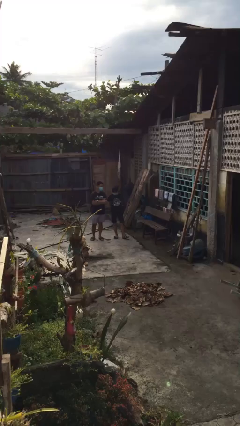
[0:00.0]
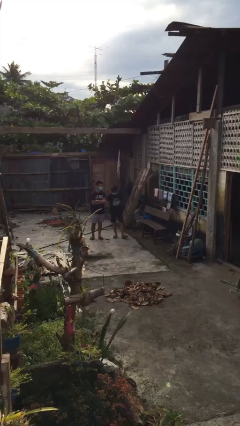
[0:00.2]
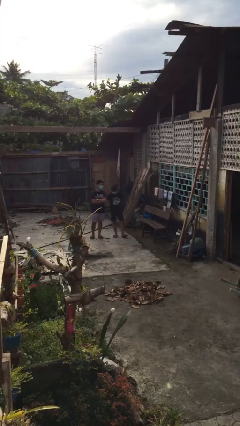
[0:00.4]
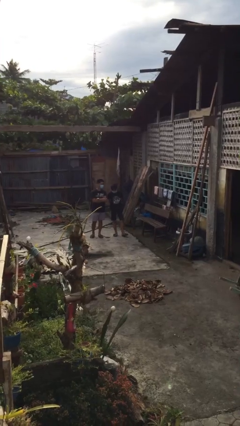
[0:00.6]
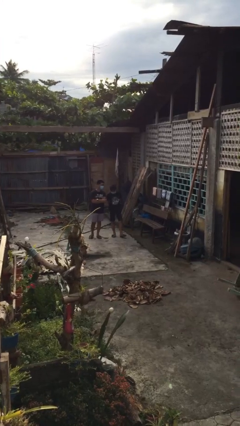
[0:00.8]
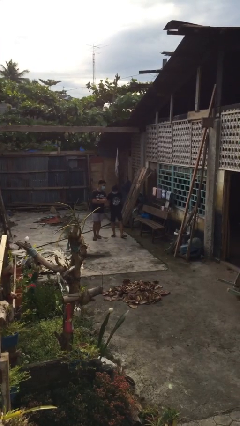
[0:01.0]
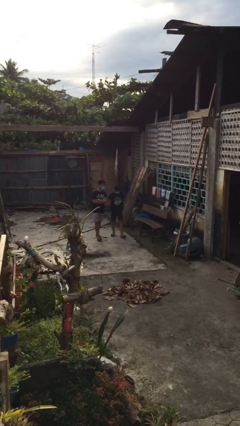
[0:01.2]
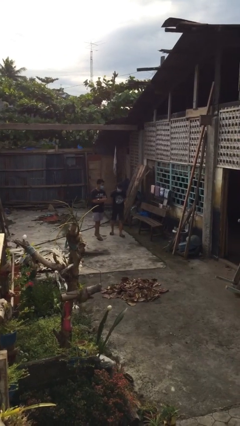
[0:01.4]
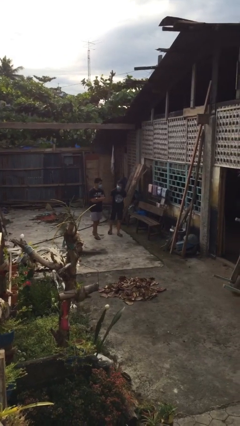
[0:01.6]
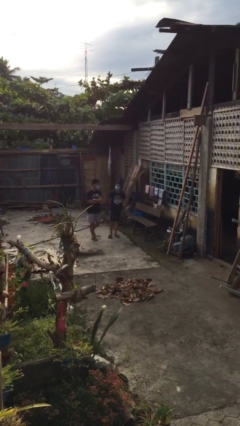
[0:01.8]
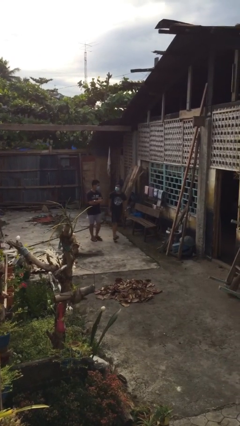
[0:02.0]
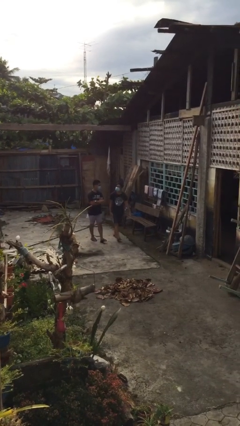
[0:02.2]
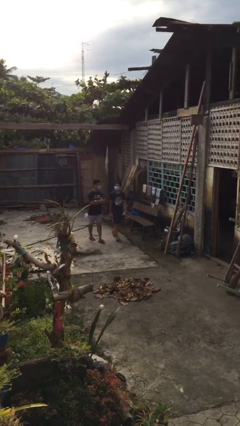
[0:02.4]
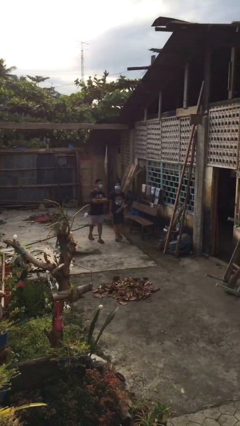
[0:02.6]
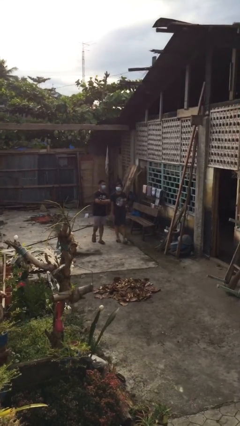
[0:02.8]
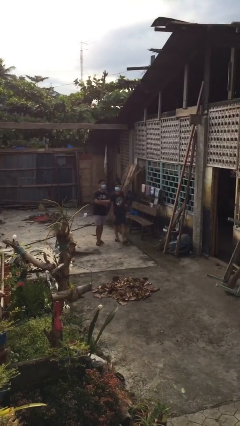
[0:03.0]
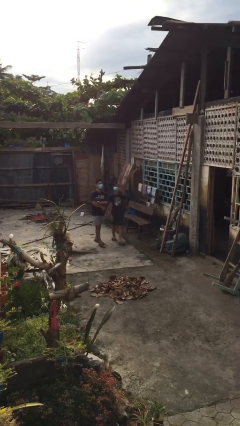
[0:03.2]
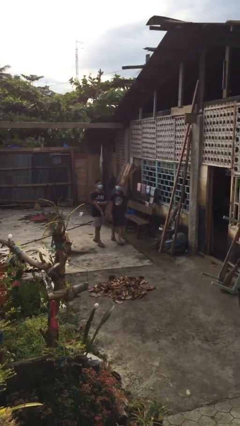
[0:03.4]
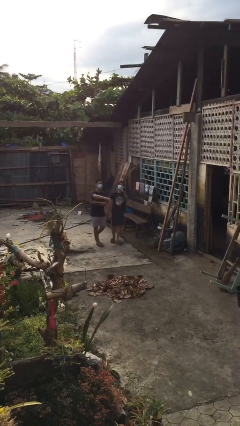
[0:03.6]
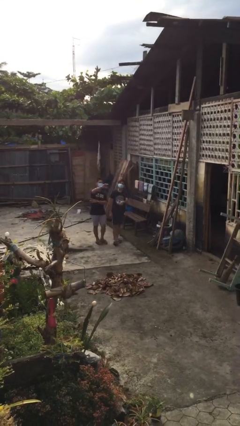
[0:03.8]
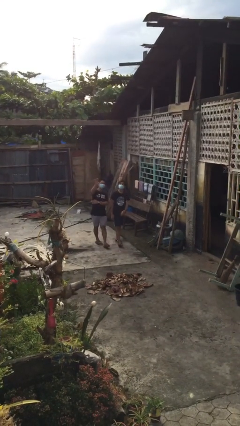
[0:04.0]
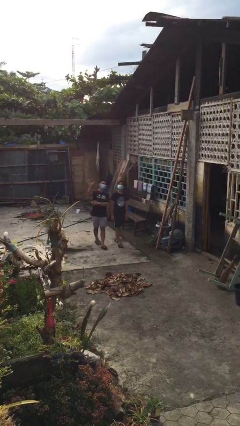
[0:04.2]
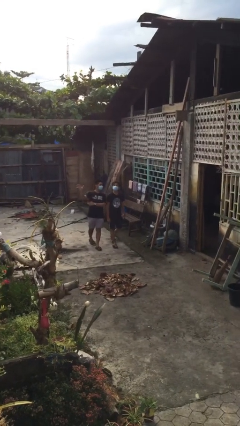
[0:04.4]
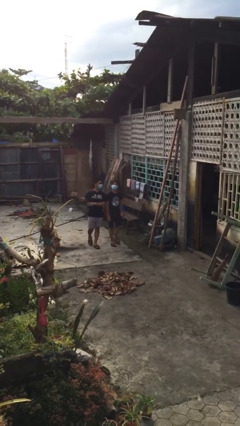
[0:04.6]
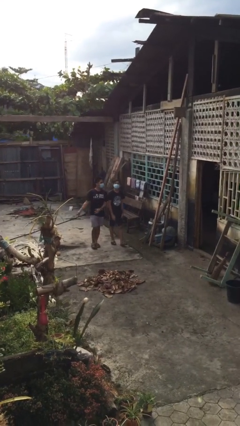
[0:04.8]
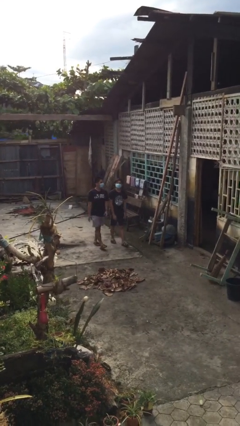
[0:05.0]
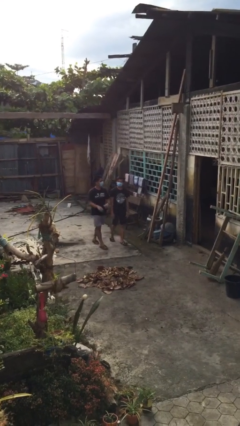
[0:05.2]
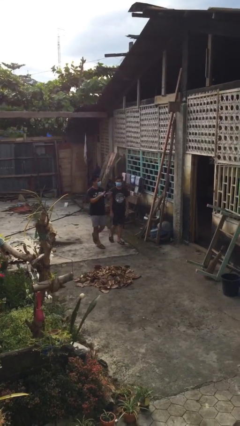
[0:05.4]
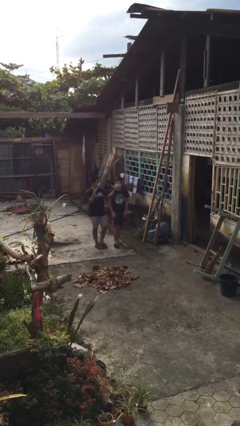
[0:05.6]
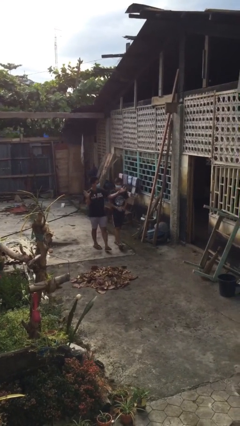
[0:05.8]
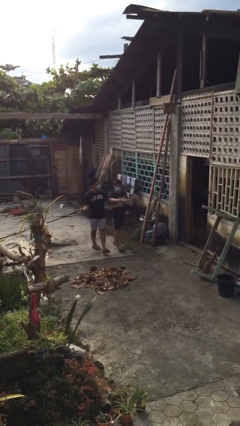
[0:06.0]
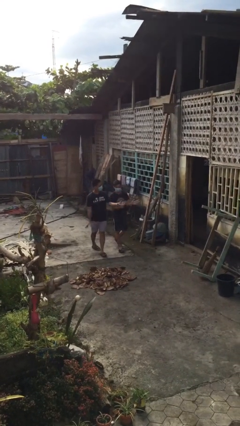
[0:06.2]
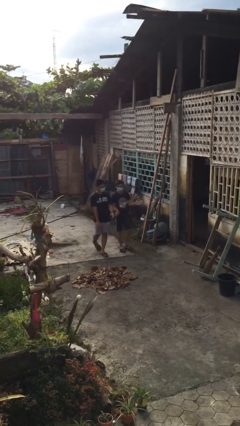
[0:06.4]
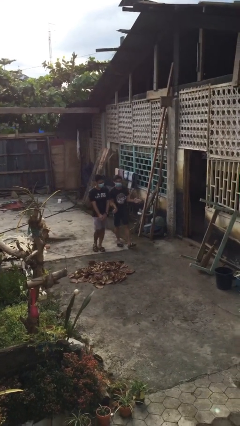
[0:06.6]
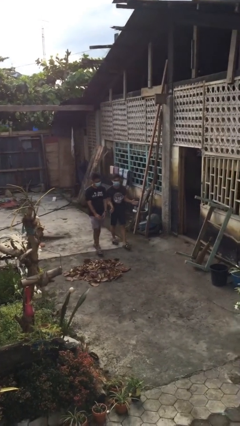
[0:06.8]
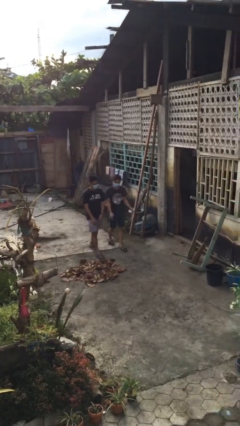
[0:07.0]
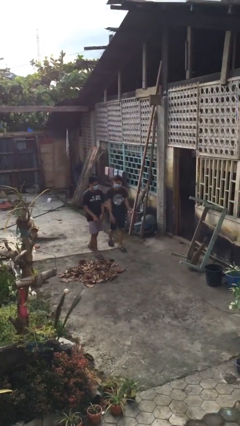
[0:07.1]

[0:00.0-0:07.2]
person talks to person

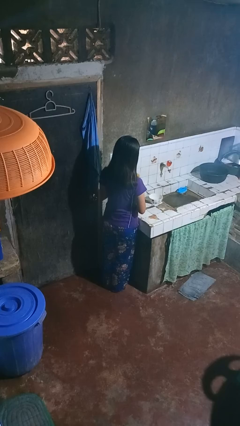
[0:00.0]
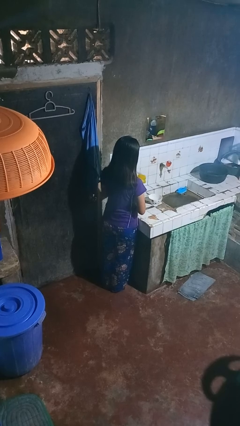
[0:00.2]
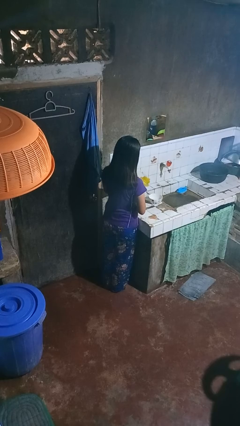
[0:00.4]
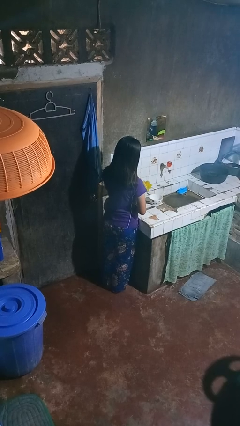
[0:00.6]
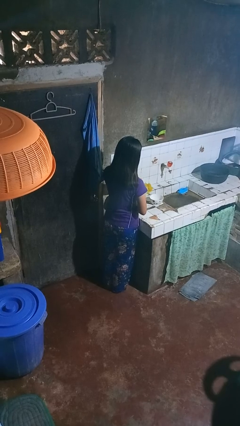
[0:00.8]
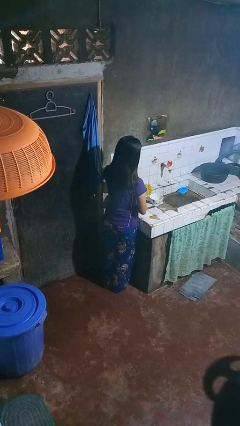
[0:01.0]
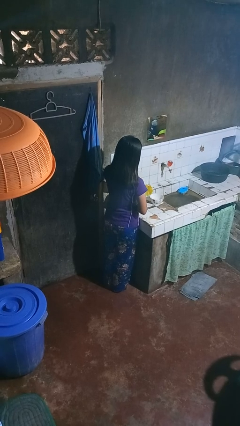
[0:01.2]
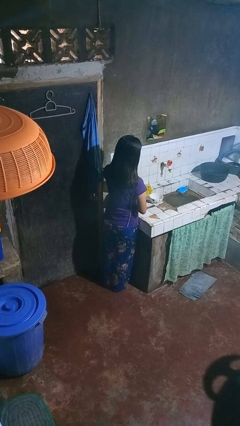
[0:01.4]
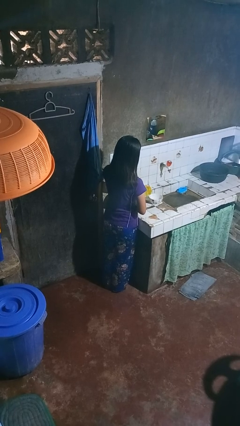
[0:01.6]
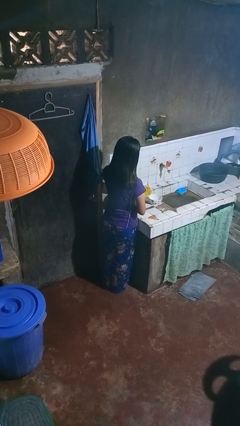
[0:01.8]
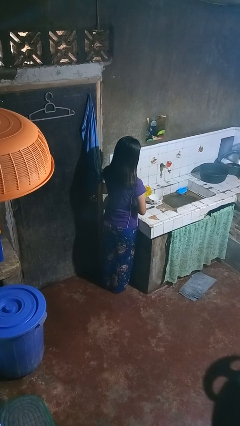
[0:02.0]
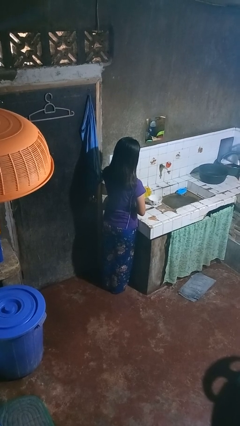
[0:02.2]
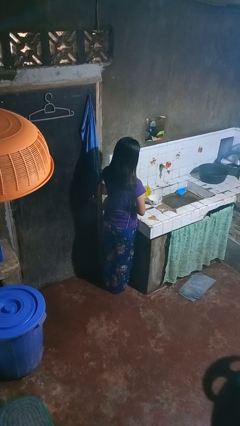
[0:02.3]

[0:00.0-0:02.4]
person pours into bowl

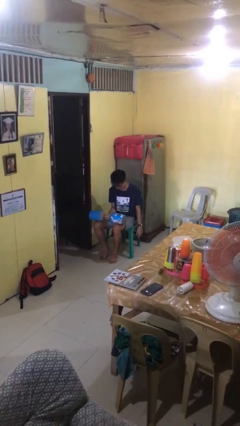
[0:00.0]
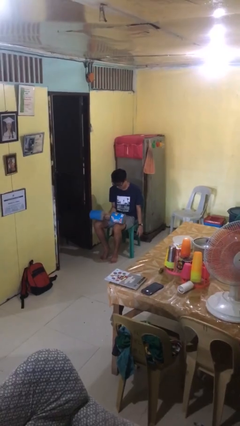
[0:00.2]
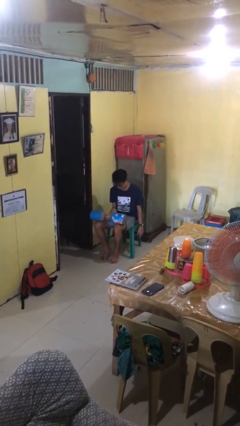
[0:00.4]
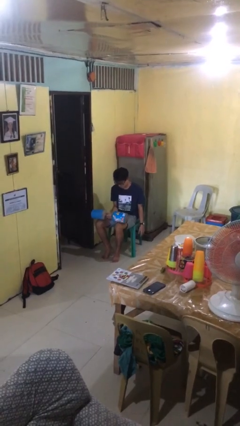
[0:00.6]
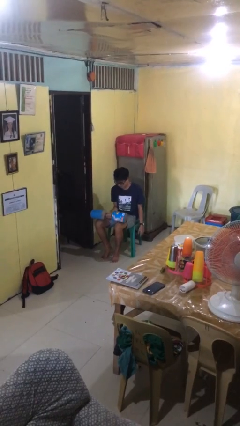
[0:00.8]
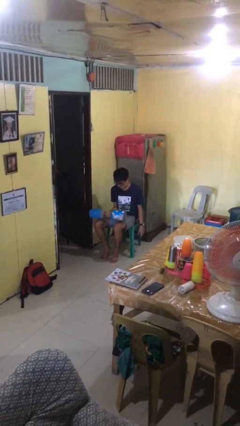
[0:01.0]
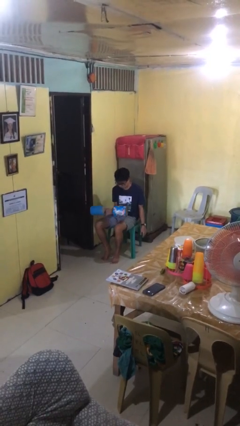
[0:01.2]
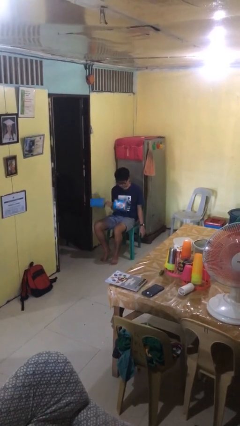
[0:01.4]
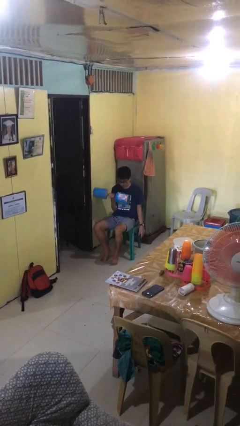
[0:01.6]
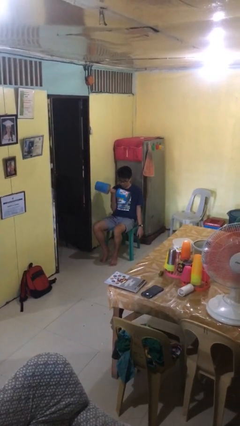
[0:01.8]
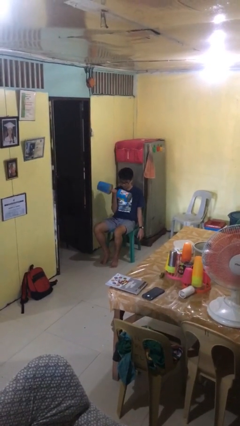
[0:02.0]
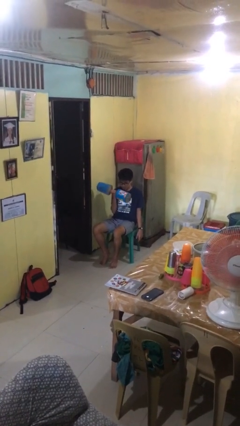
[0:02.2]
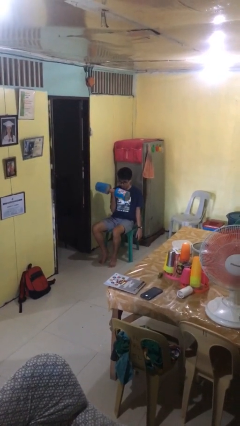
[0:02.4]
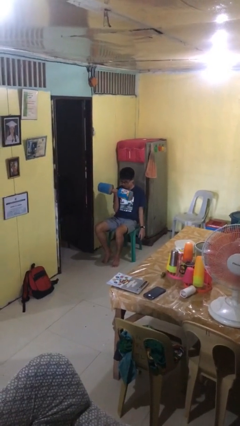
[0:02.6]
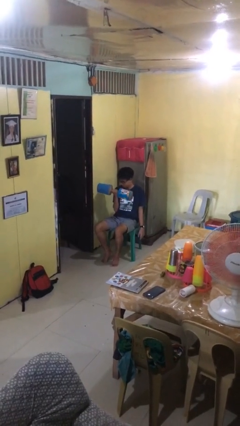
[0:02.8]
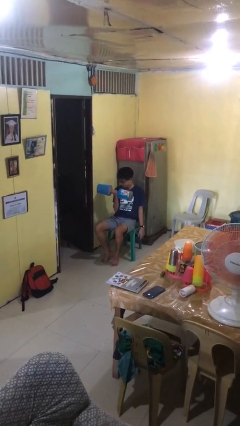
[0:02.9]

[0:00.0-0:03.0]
person lifts dumbbells

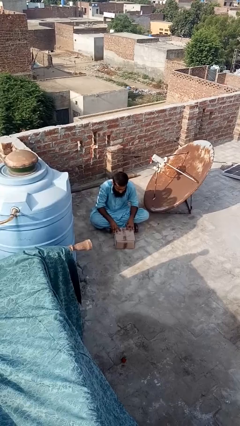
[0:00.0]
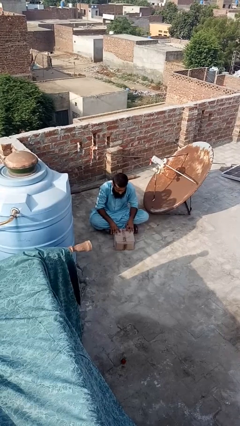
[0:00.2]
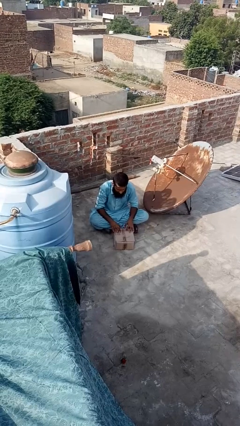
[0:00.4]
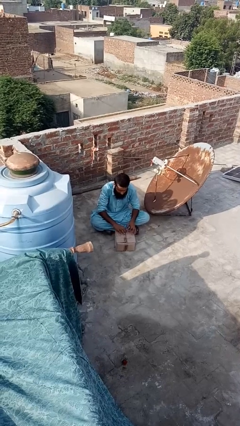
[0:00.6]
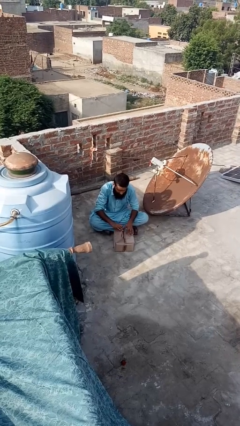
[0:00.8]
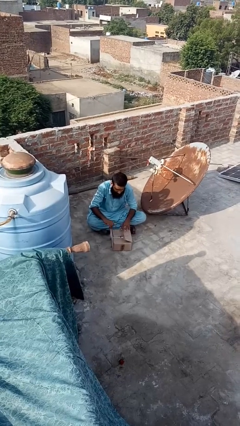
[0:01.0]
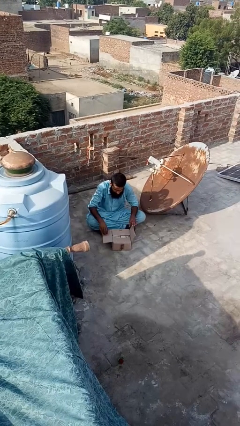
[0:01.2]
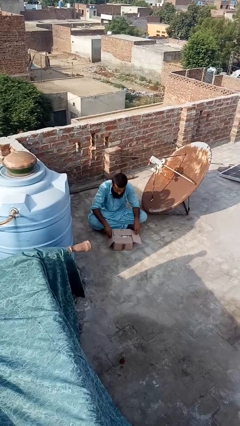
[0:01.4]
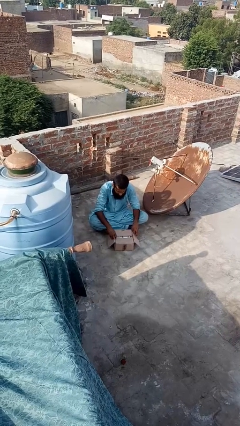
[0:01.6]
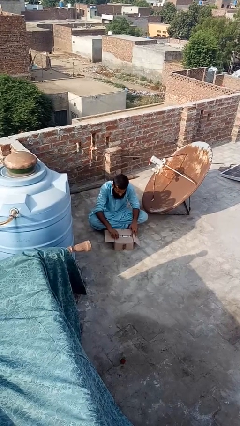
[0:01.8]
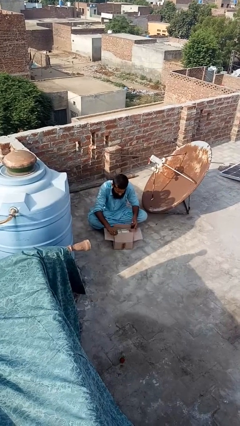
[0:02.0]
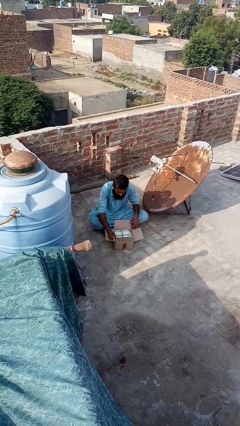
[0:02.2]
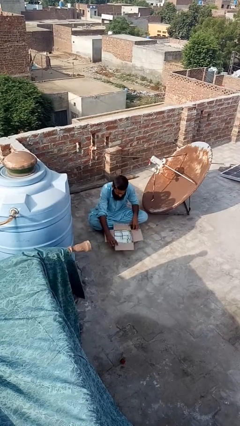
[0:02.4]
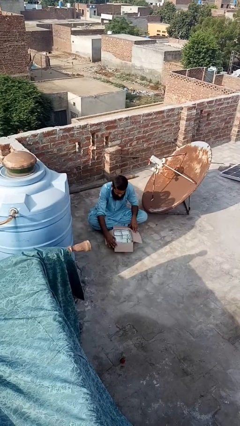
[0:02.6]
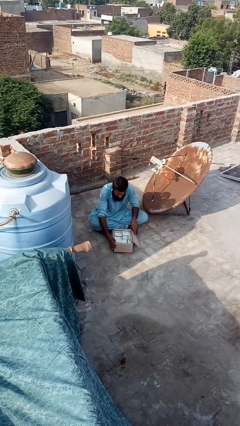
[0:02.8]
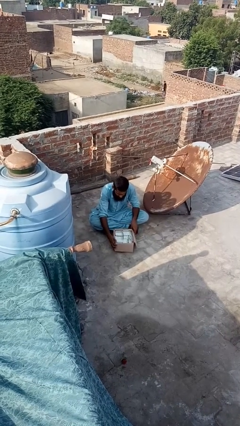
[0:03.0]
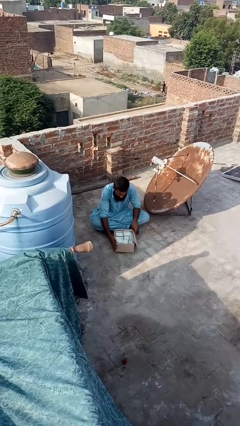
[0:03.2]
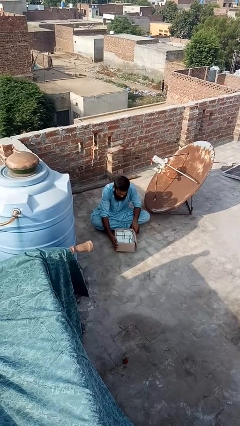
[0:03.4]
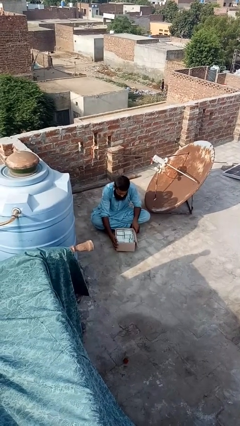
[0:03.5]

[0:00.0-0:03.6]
person opens box

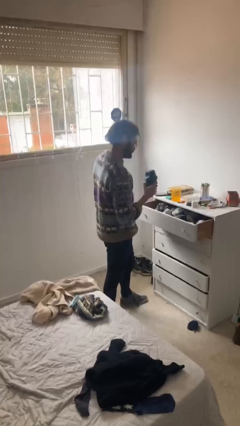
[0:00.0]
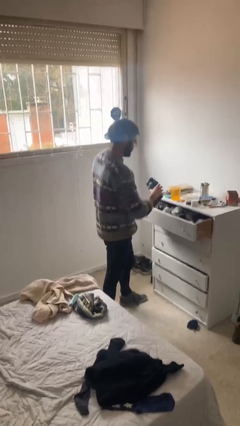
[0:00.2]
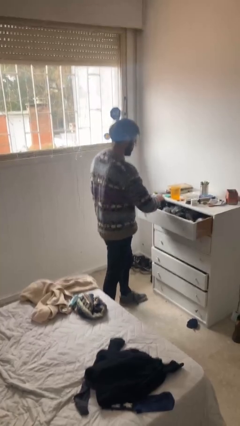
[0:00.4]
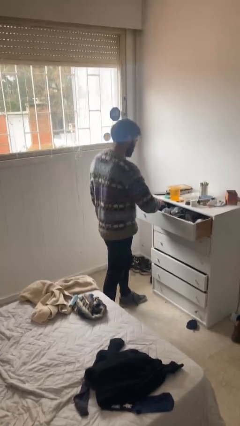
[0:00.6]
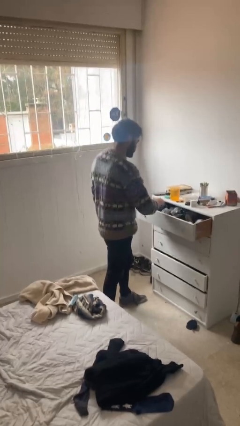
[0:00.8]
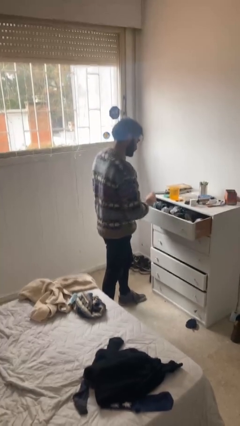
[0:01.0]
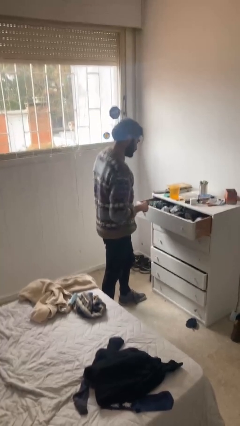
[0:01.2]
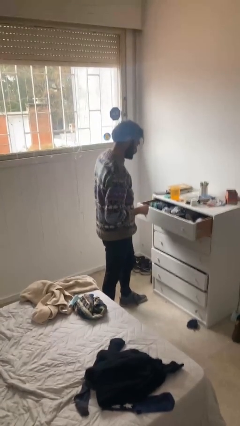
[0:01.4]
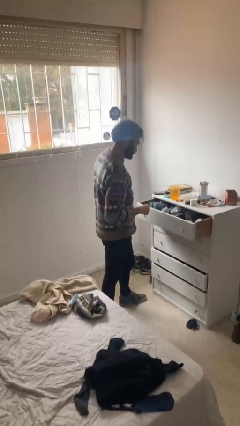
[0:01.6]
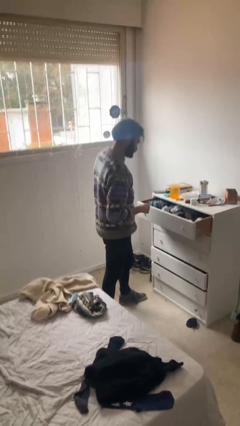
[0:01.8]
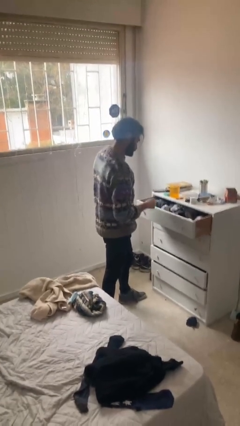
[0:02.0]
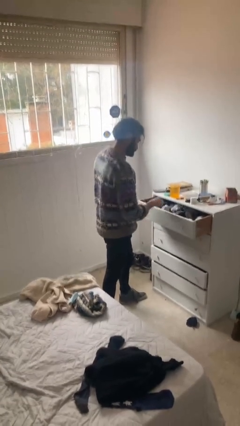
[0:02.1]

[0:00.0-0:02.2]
person puts clothes into dresser
